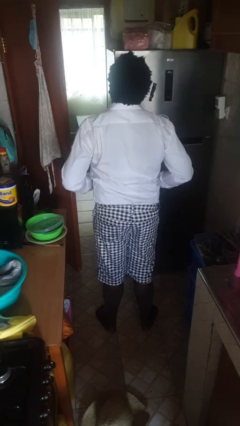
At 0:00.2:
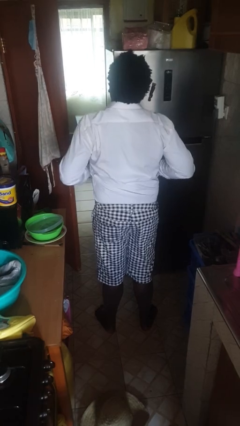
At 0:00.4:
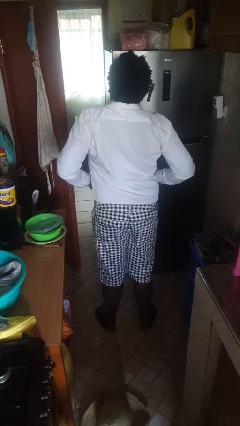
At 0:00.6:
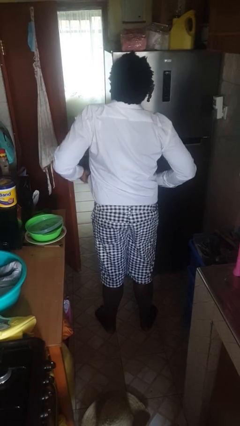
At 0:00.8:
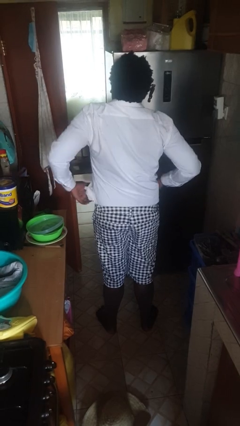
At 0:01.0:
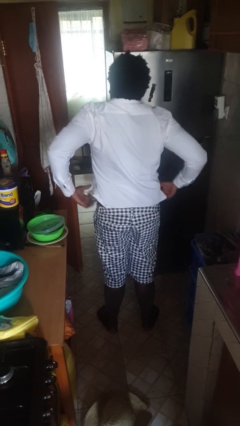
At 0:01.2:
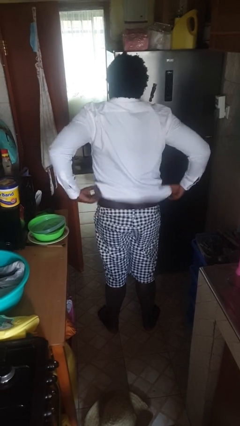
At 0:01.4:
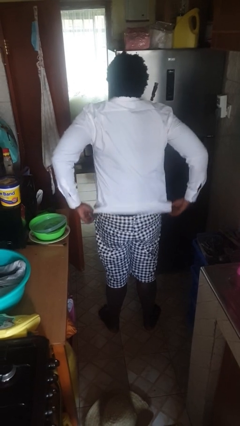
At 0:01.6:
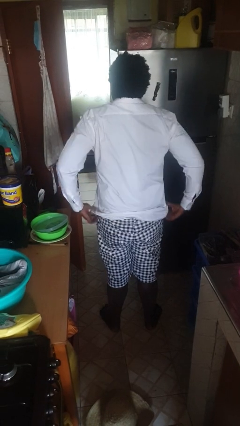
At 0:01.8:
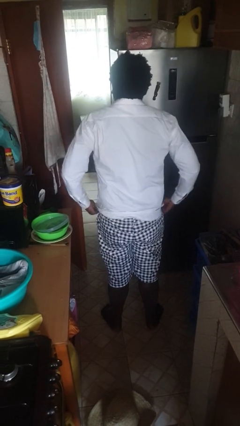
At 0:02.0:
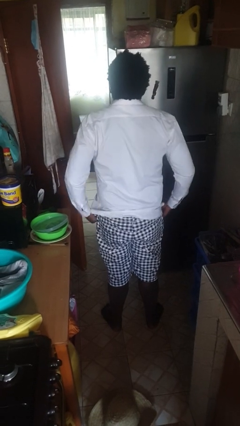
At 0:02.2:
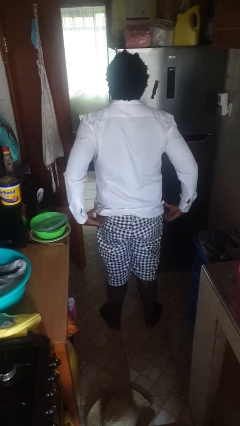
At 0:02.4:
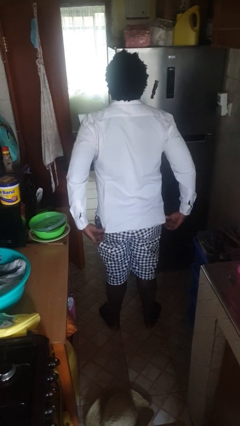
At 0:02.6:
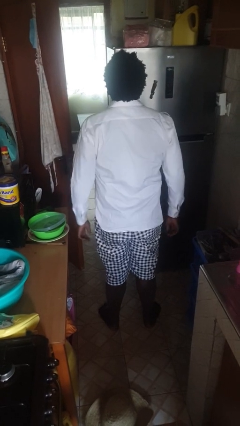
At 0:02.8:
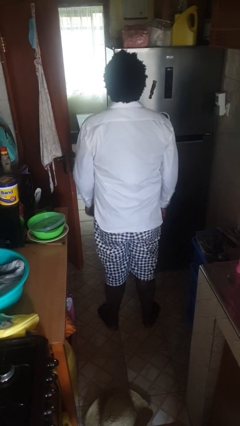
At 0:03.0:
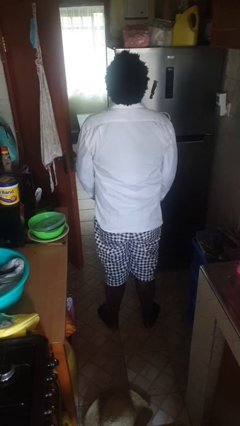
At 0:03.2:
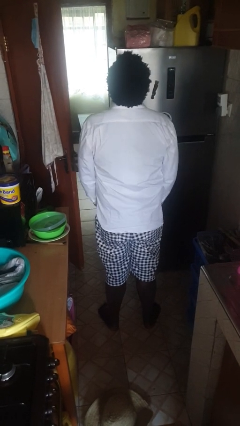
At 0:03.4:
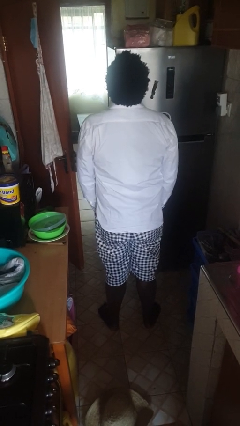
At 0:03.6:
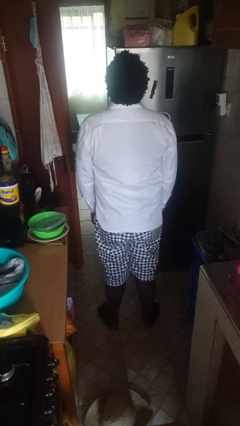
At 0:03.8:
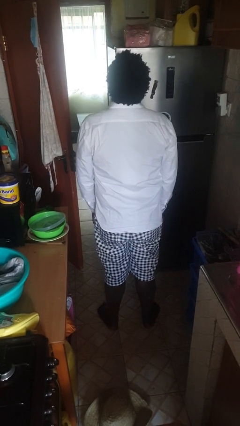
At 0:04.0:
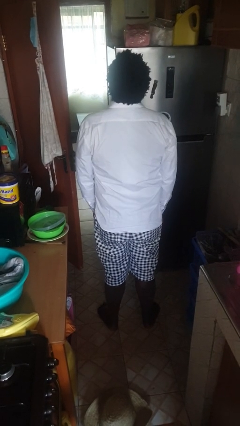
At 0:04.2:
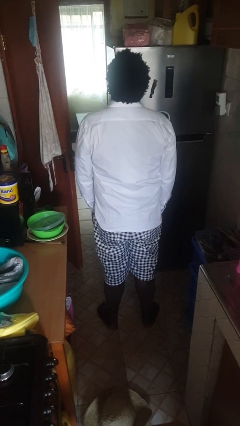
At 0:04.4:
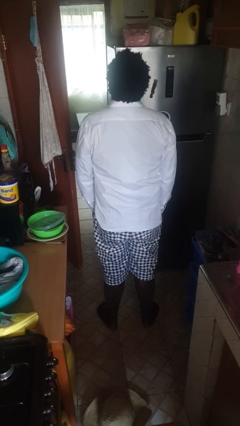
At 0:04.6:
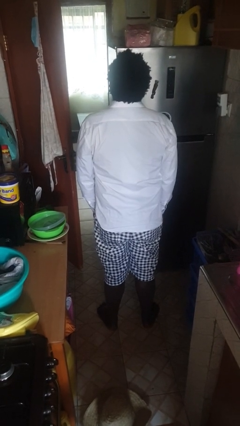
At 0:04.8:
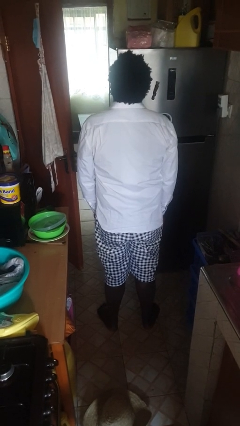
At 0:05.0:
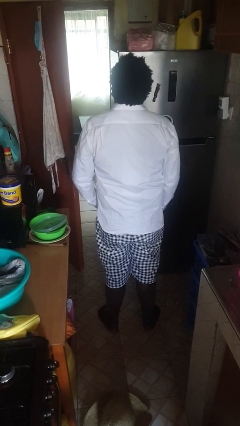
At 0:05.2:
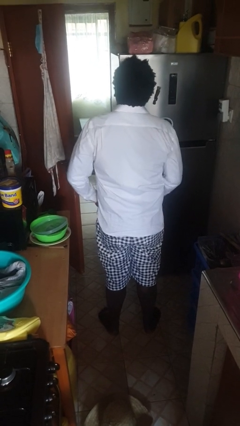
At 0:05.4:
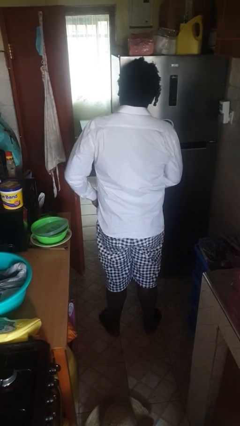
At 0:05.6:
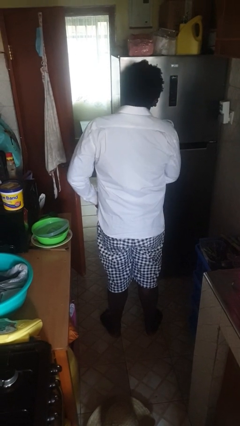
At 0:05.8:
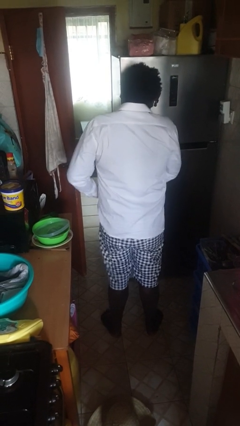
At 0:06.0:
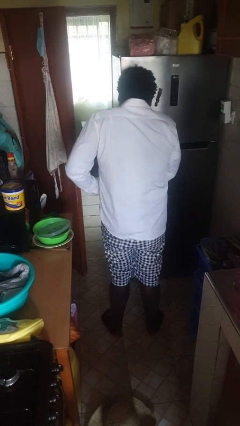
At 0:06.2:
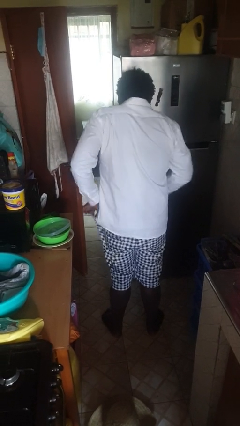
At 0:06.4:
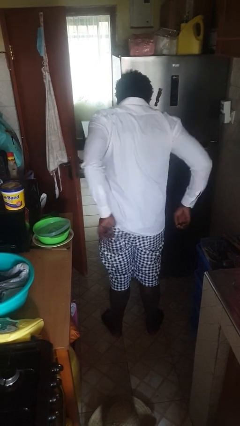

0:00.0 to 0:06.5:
person untucks shirt

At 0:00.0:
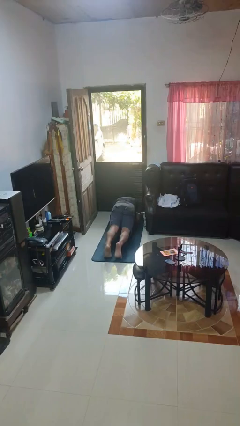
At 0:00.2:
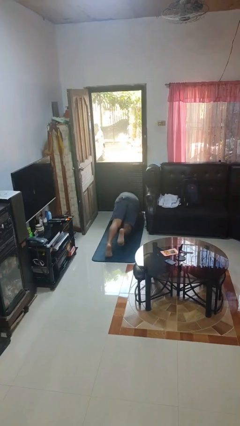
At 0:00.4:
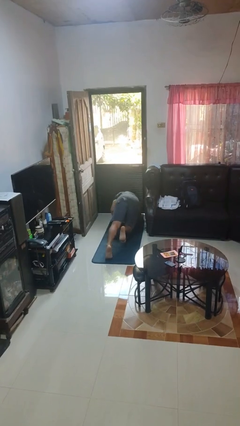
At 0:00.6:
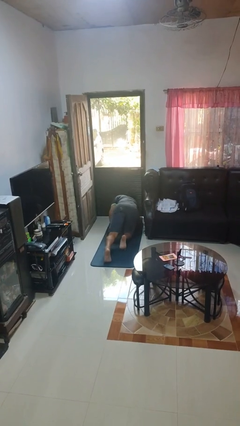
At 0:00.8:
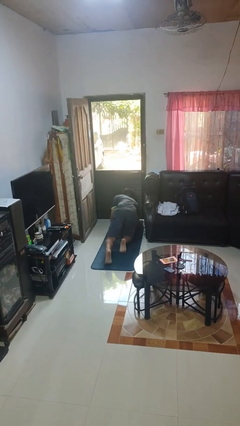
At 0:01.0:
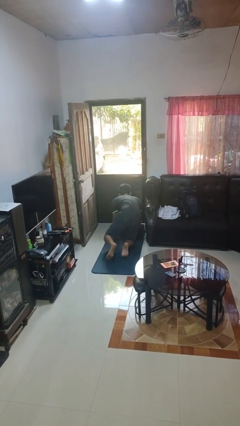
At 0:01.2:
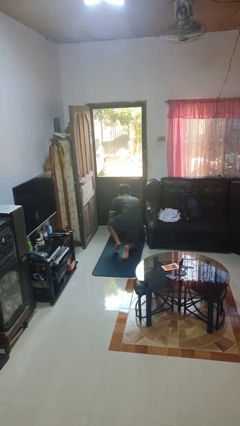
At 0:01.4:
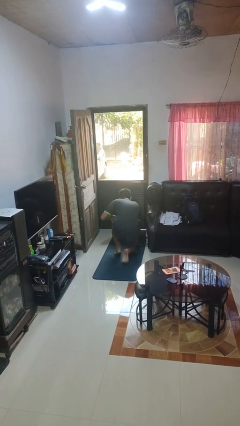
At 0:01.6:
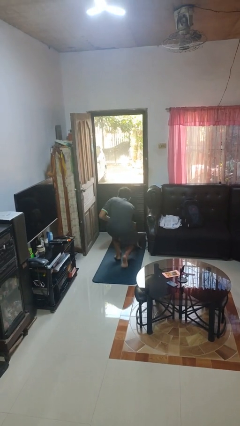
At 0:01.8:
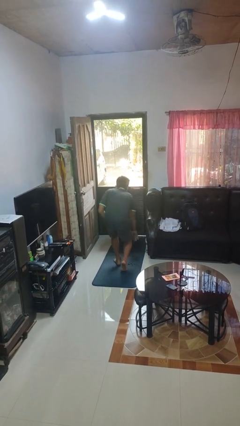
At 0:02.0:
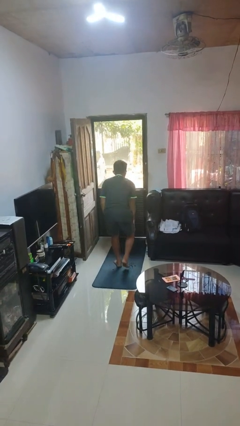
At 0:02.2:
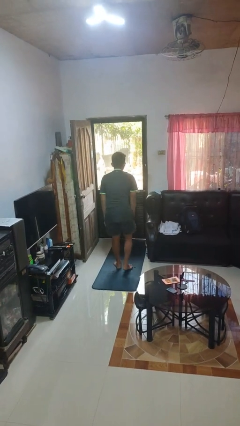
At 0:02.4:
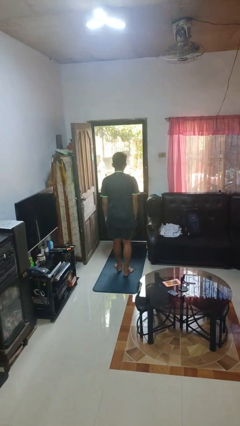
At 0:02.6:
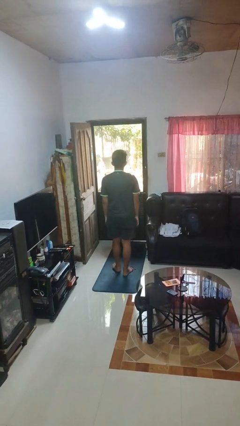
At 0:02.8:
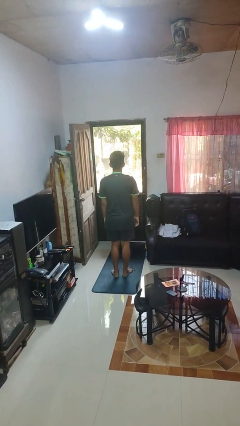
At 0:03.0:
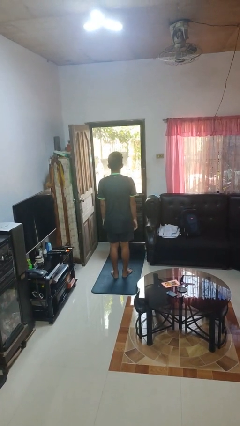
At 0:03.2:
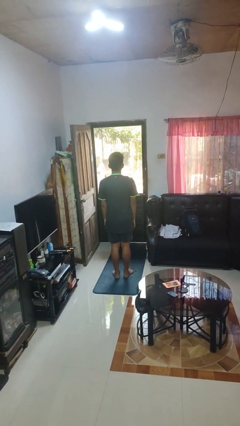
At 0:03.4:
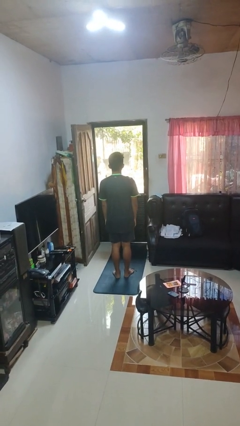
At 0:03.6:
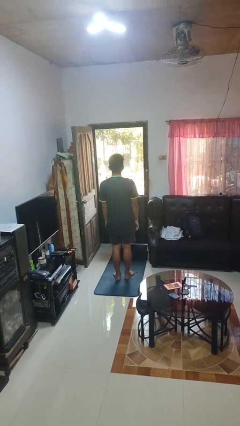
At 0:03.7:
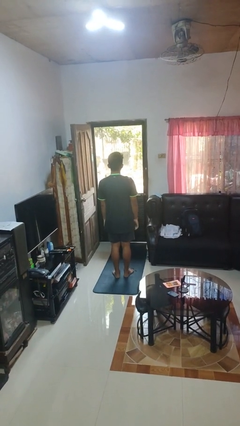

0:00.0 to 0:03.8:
person stands up from floor

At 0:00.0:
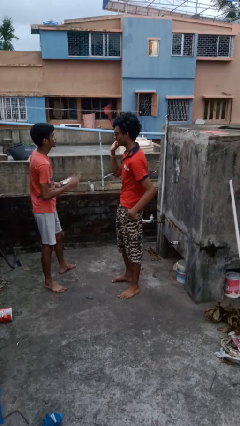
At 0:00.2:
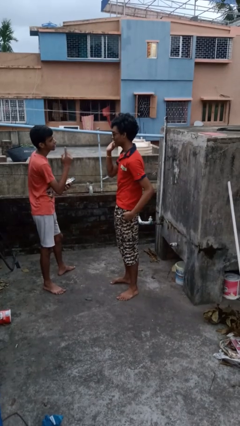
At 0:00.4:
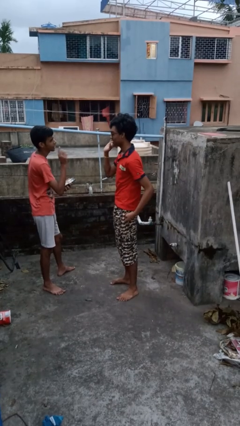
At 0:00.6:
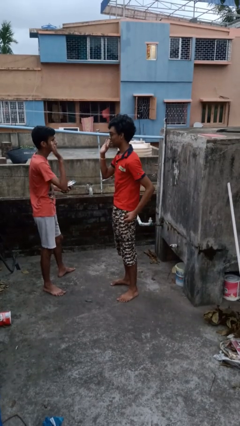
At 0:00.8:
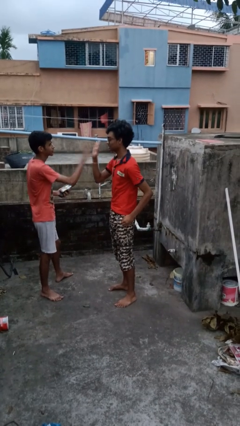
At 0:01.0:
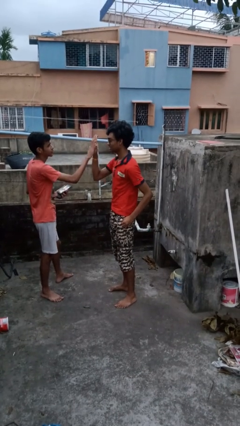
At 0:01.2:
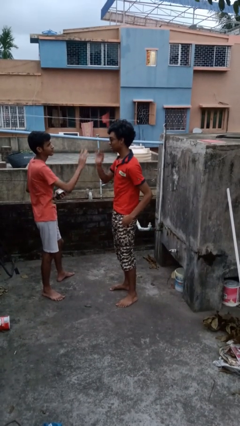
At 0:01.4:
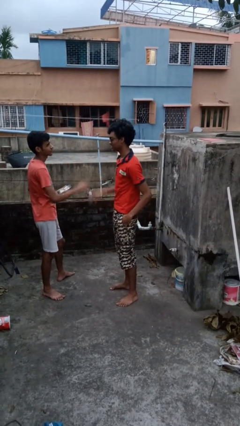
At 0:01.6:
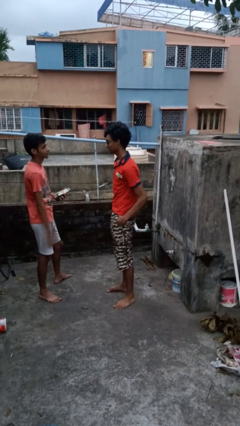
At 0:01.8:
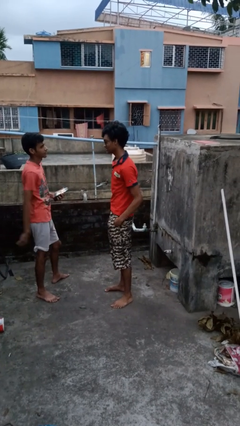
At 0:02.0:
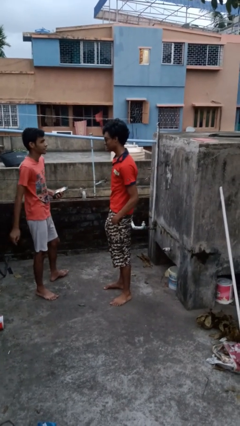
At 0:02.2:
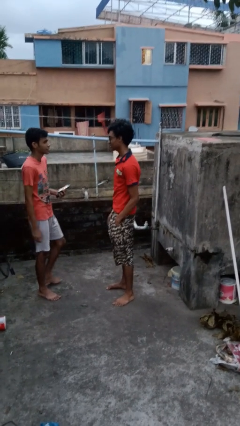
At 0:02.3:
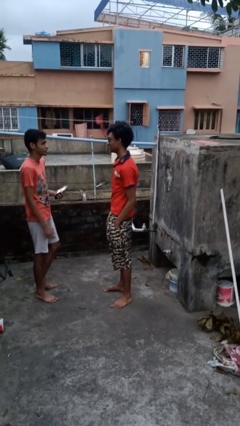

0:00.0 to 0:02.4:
person highfives hand

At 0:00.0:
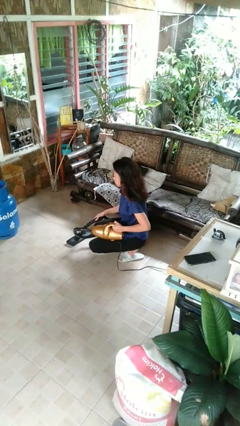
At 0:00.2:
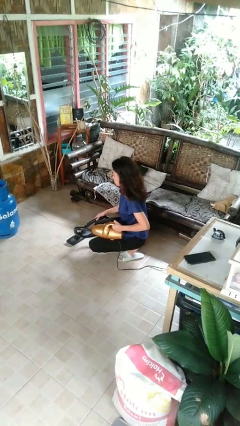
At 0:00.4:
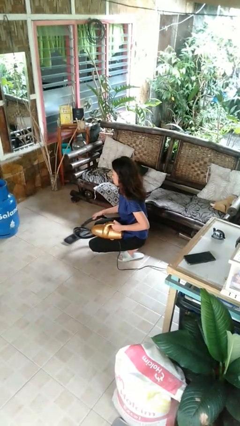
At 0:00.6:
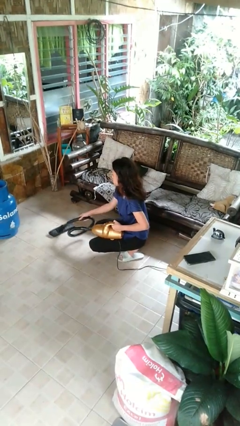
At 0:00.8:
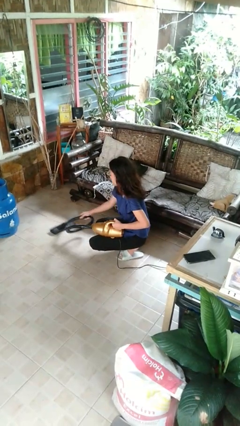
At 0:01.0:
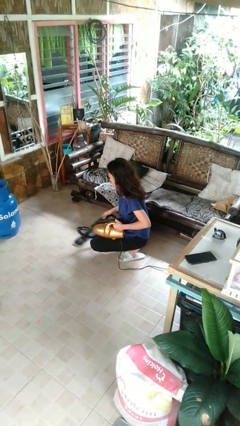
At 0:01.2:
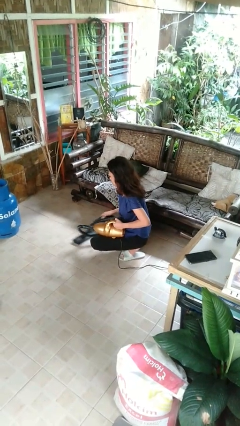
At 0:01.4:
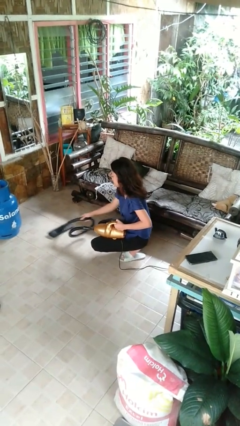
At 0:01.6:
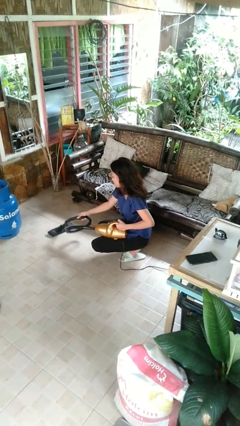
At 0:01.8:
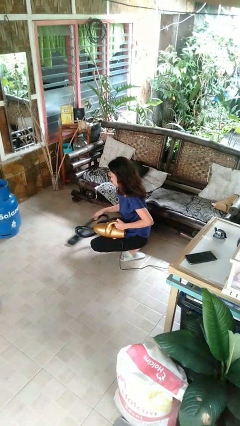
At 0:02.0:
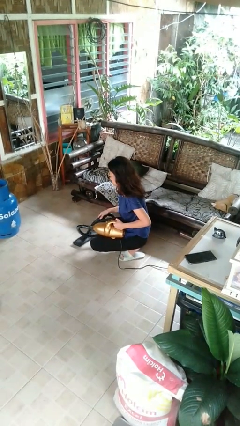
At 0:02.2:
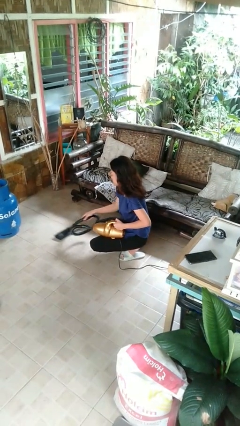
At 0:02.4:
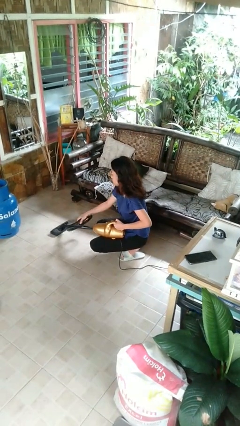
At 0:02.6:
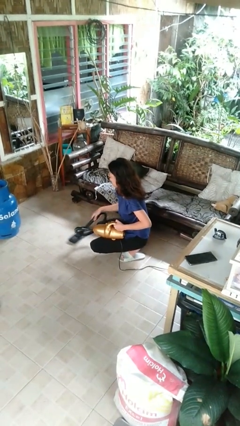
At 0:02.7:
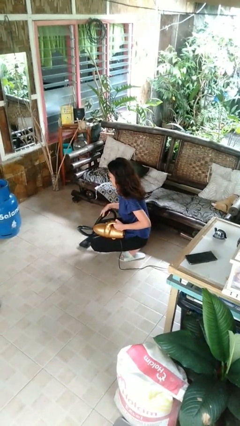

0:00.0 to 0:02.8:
person vacuums carpet

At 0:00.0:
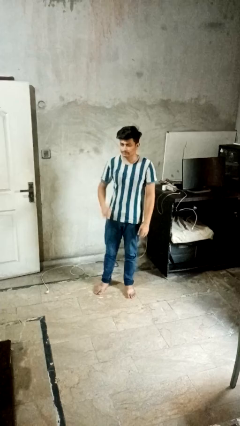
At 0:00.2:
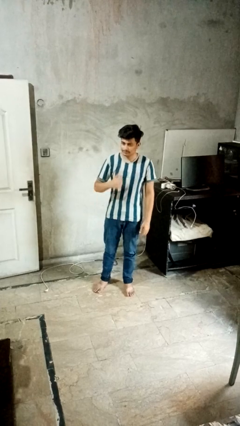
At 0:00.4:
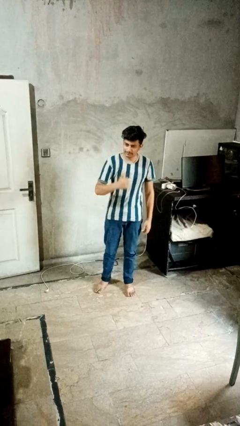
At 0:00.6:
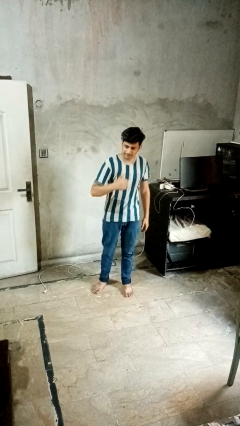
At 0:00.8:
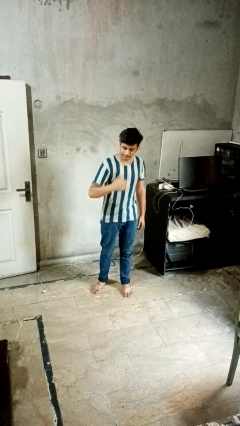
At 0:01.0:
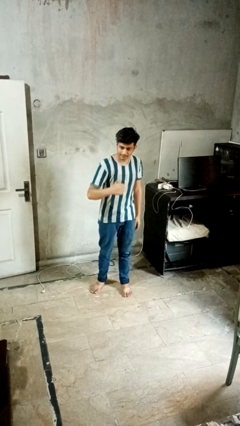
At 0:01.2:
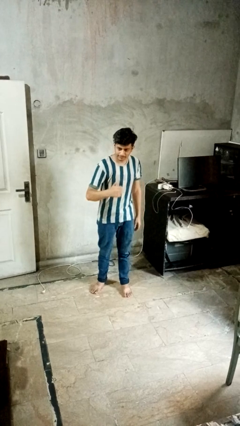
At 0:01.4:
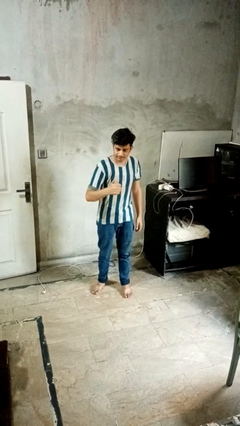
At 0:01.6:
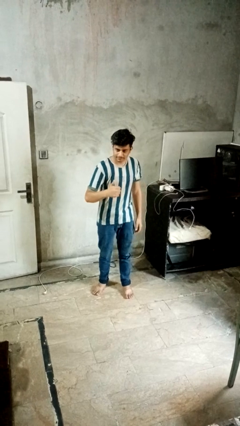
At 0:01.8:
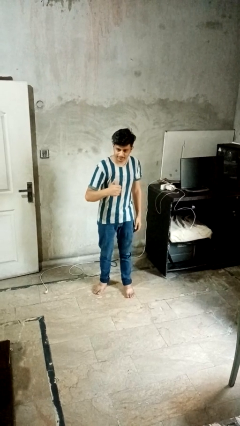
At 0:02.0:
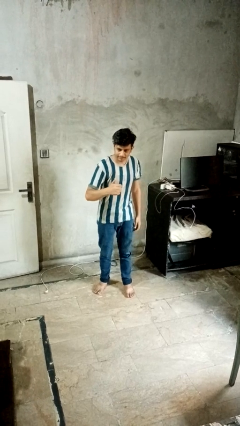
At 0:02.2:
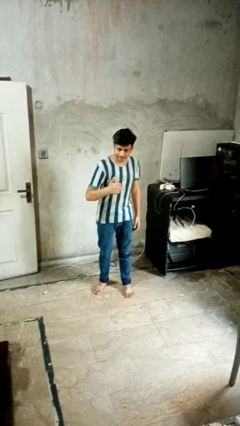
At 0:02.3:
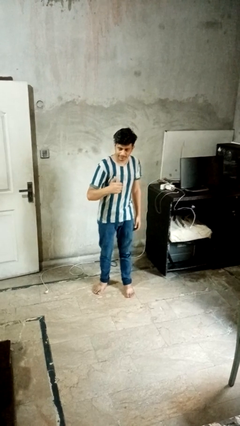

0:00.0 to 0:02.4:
person gestures thumbs up
